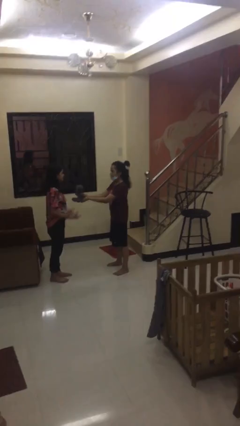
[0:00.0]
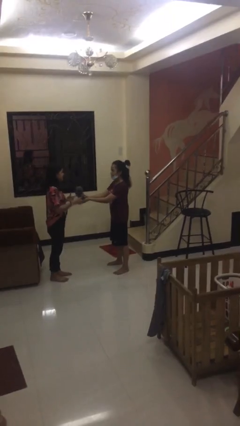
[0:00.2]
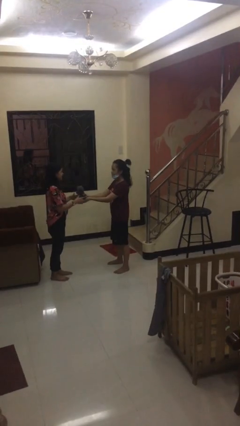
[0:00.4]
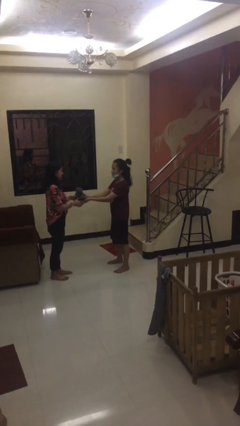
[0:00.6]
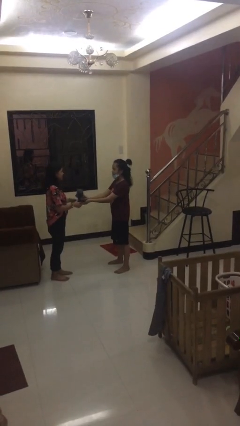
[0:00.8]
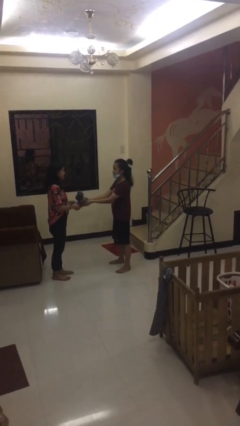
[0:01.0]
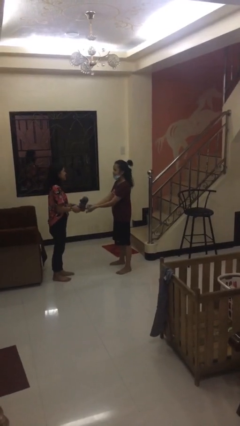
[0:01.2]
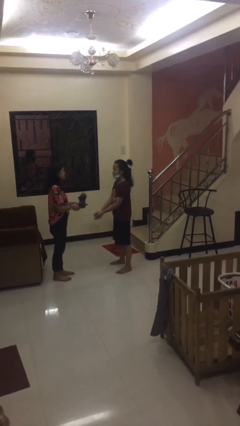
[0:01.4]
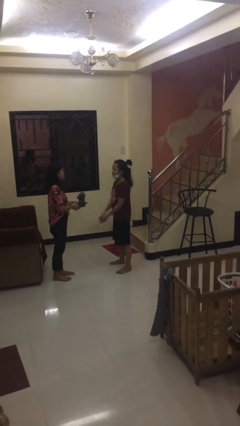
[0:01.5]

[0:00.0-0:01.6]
person transfers object to person

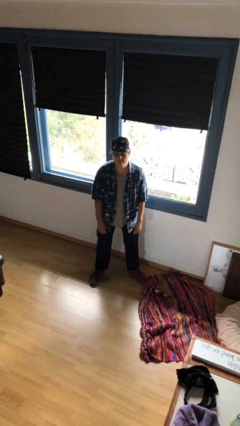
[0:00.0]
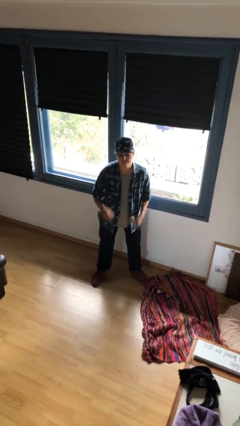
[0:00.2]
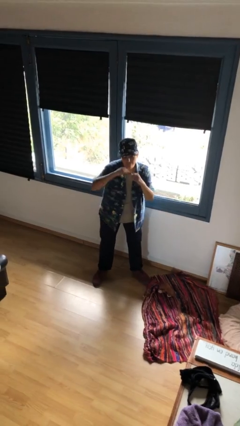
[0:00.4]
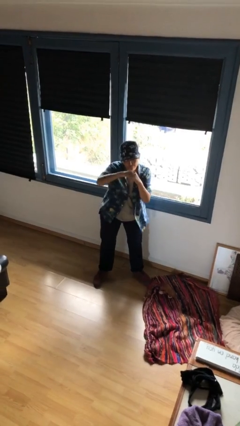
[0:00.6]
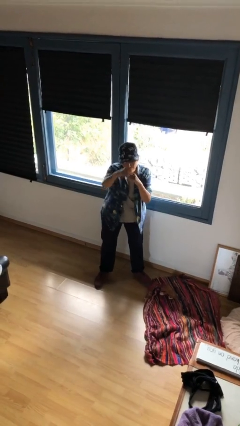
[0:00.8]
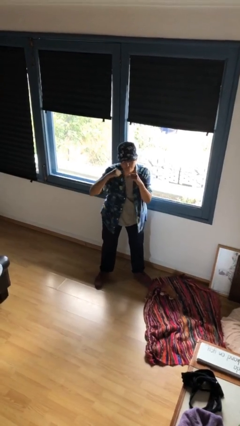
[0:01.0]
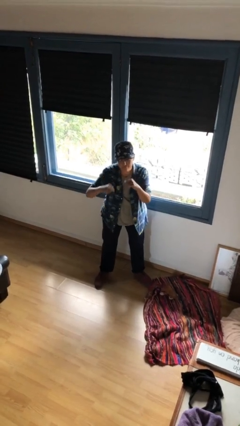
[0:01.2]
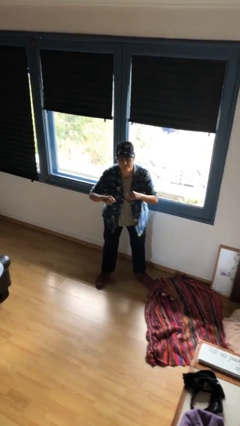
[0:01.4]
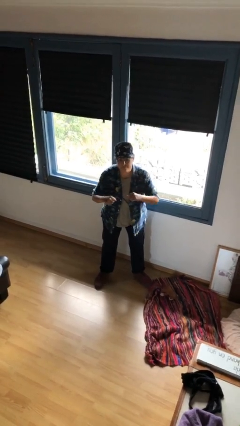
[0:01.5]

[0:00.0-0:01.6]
person punches

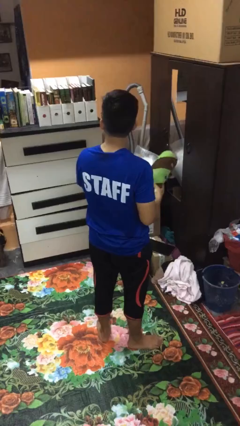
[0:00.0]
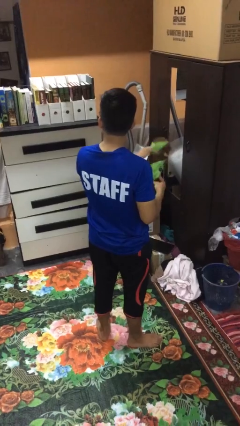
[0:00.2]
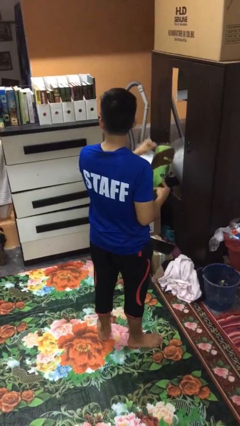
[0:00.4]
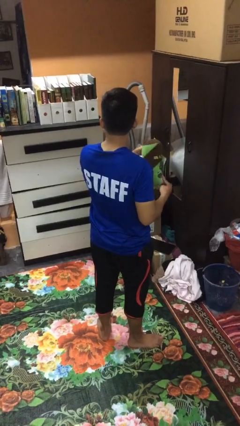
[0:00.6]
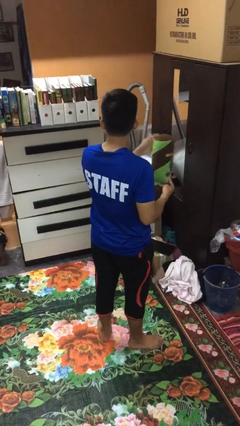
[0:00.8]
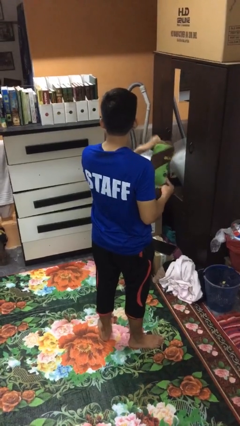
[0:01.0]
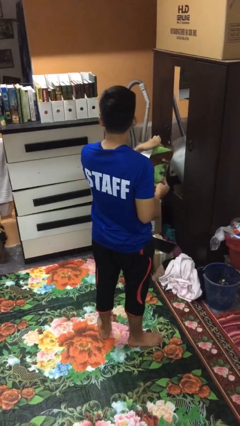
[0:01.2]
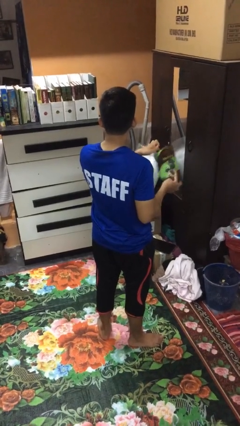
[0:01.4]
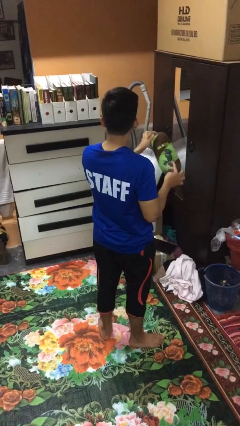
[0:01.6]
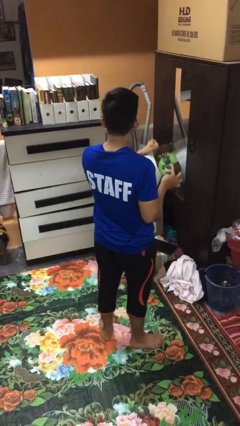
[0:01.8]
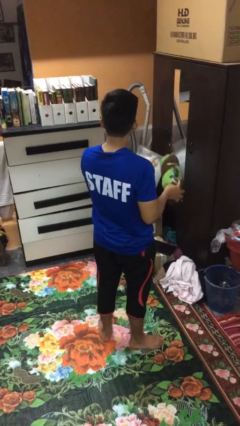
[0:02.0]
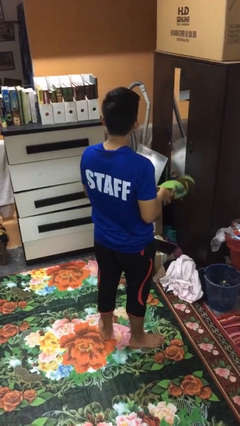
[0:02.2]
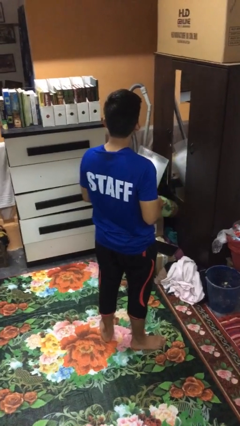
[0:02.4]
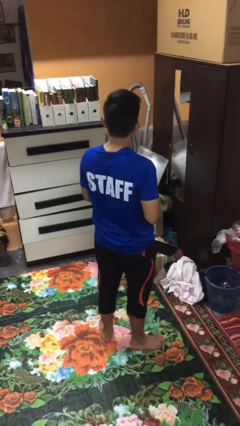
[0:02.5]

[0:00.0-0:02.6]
person taps object with finger

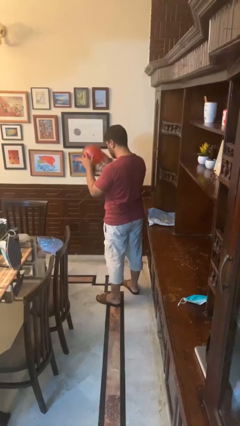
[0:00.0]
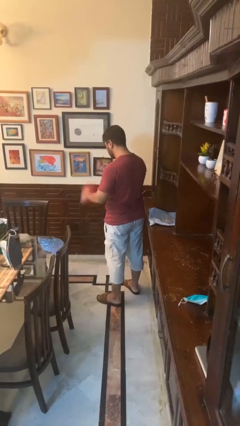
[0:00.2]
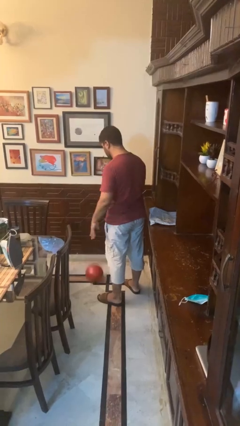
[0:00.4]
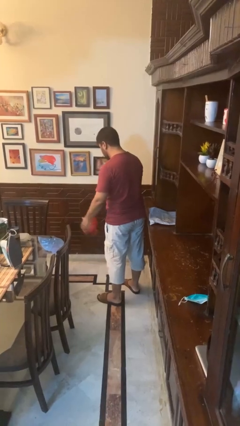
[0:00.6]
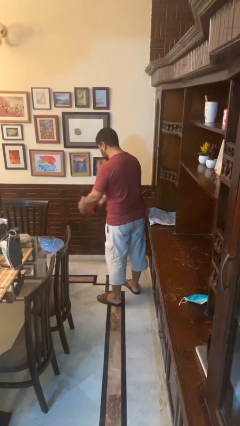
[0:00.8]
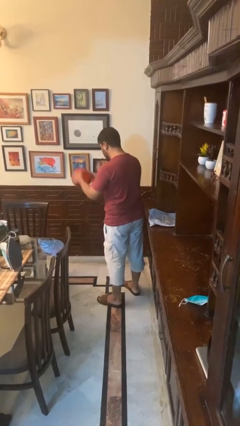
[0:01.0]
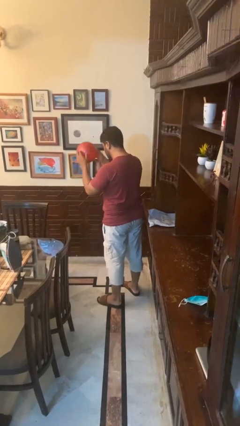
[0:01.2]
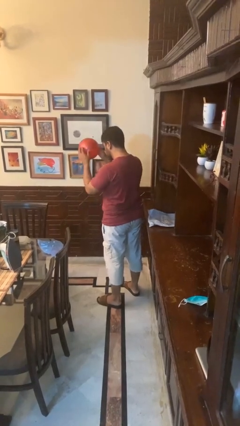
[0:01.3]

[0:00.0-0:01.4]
person bounces ball on floor

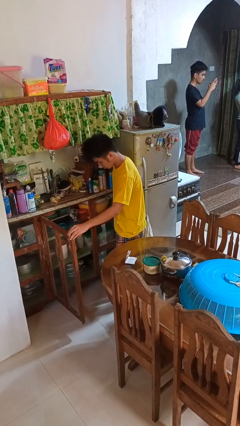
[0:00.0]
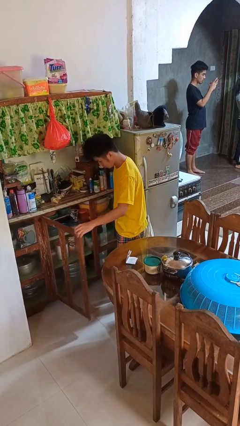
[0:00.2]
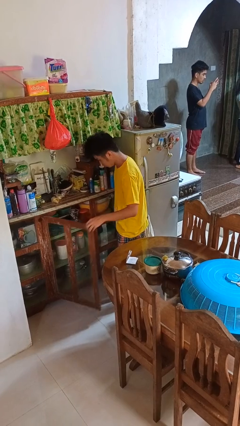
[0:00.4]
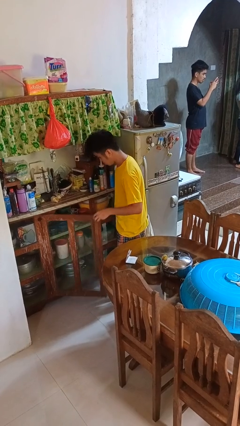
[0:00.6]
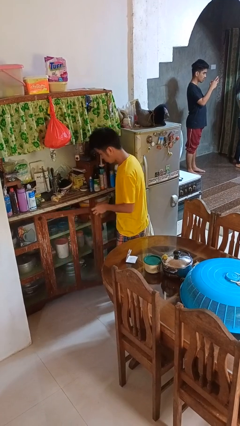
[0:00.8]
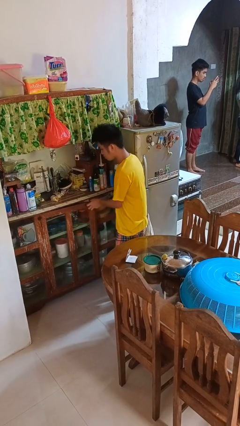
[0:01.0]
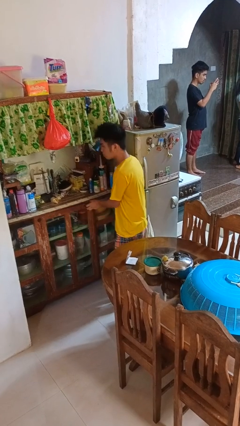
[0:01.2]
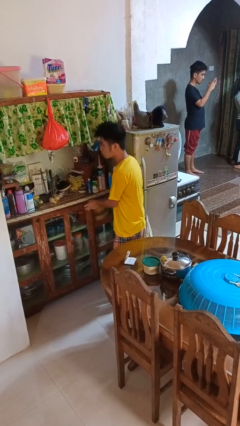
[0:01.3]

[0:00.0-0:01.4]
person closes cabinet

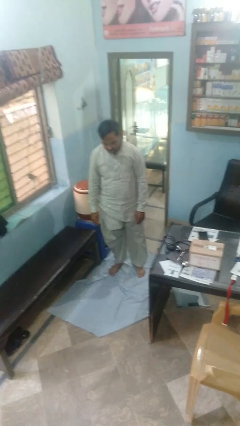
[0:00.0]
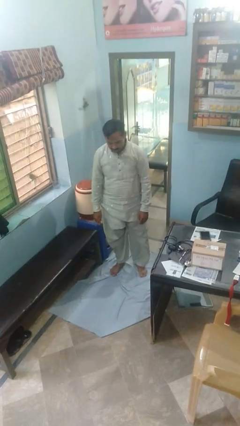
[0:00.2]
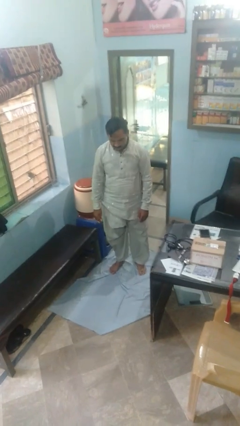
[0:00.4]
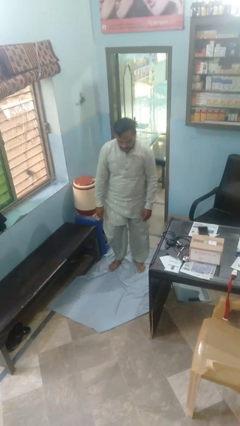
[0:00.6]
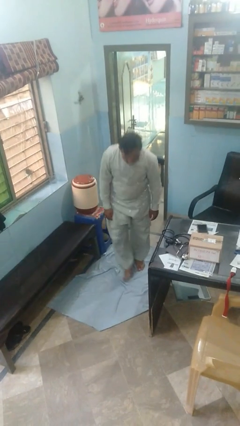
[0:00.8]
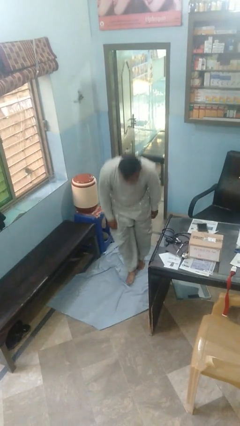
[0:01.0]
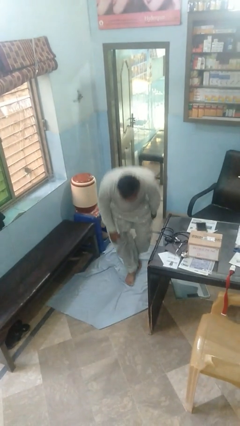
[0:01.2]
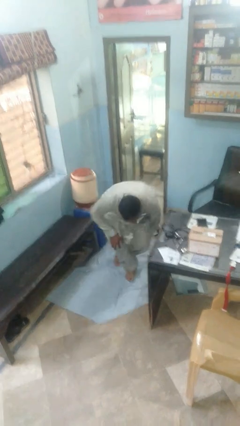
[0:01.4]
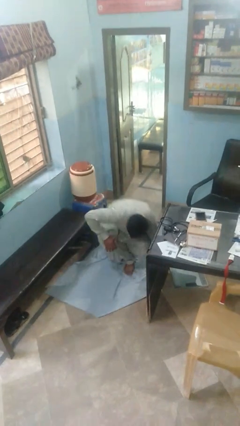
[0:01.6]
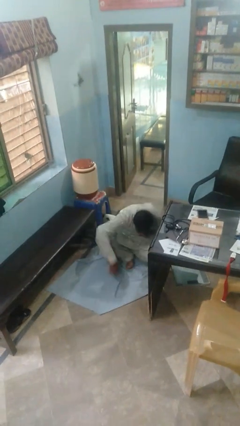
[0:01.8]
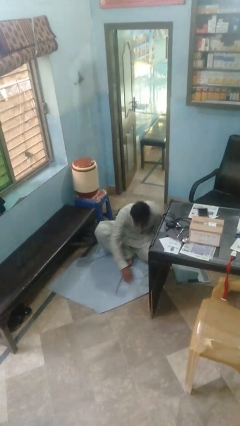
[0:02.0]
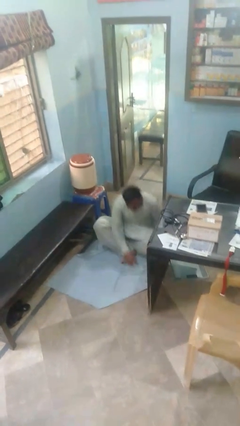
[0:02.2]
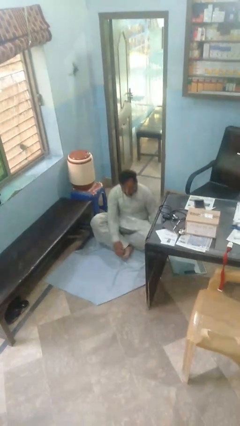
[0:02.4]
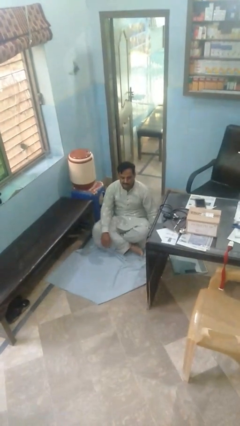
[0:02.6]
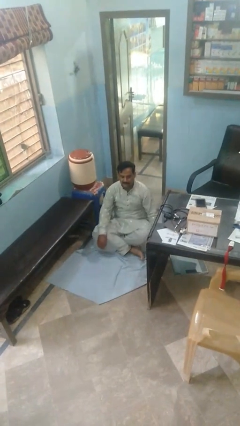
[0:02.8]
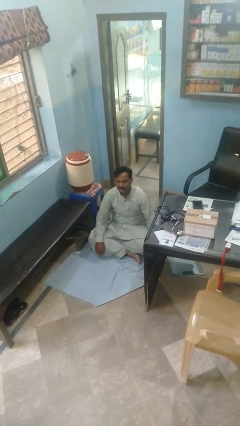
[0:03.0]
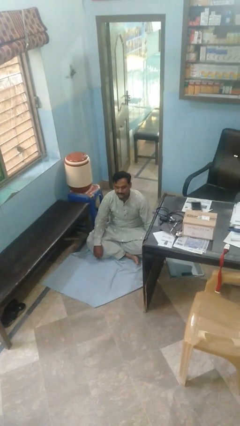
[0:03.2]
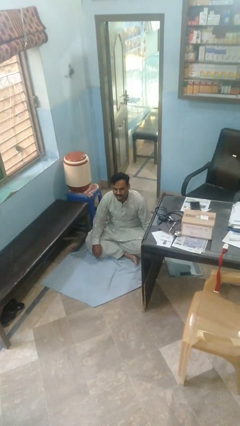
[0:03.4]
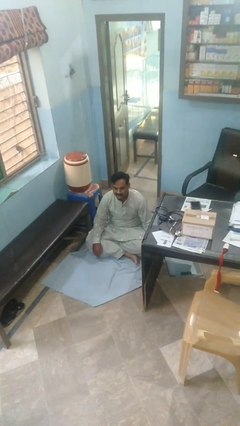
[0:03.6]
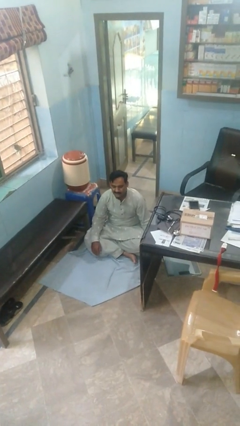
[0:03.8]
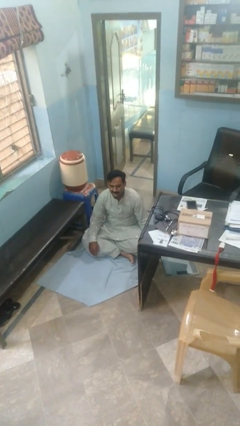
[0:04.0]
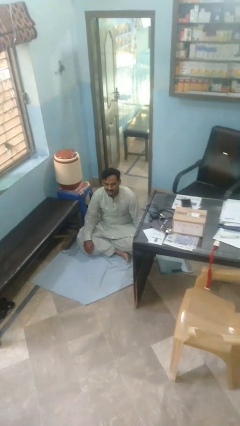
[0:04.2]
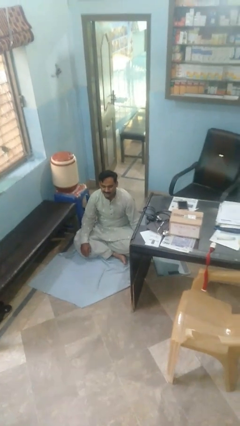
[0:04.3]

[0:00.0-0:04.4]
person sits crisscross

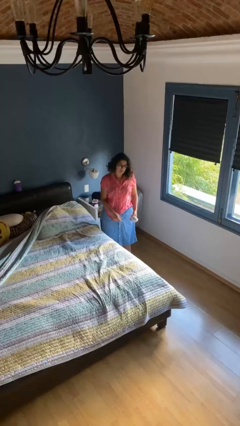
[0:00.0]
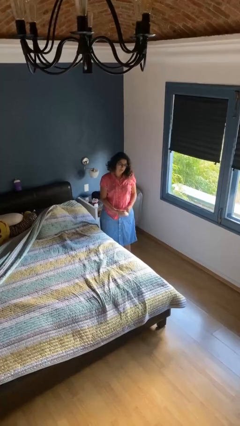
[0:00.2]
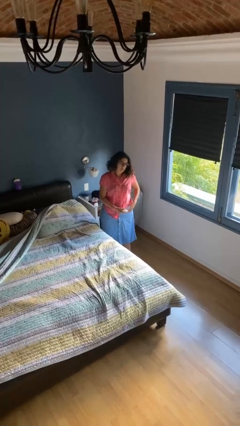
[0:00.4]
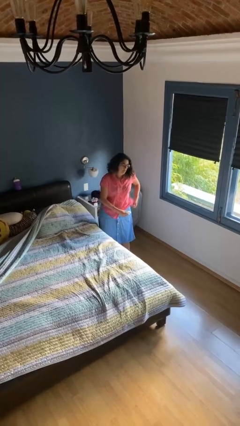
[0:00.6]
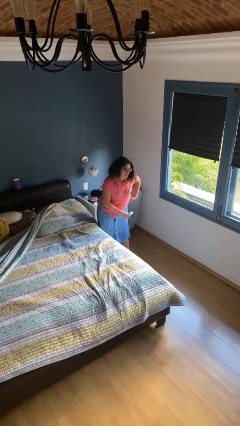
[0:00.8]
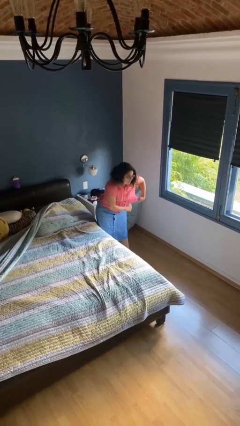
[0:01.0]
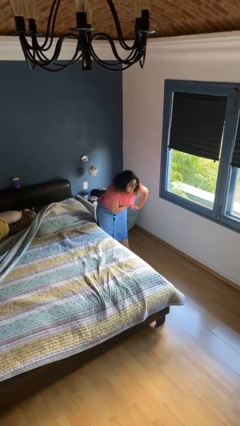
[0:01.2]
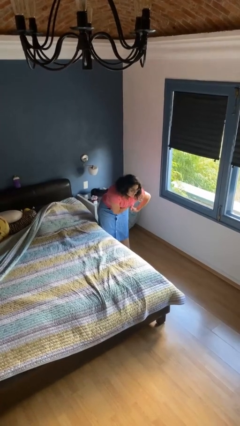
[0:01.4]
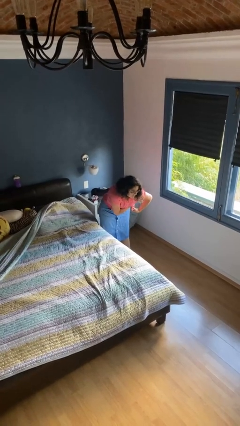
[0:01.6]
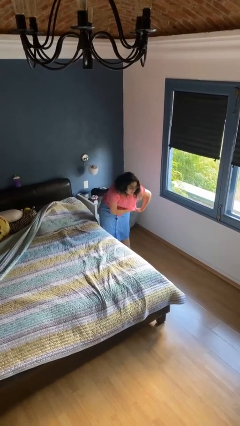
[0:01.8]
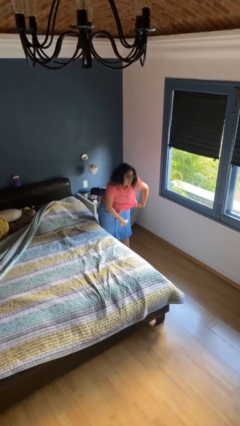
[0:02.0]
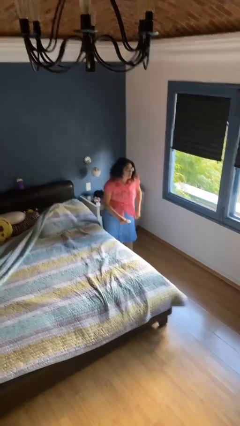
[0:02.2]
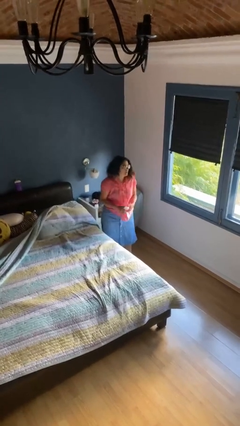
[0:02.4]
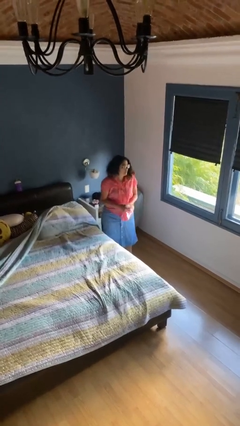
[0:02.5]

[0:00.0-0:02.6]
person applies deodorant

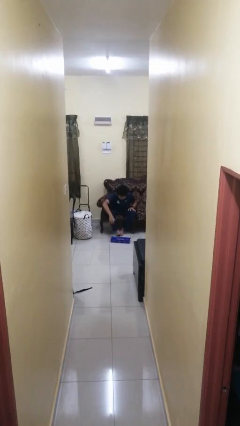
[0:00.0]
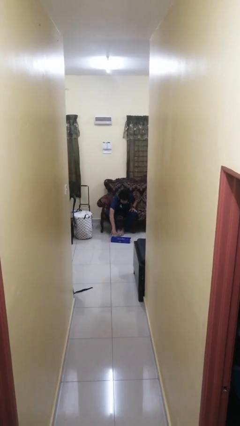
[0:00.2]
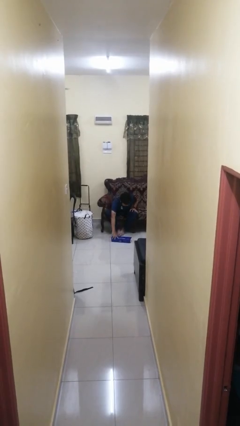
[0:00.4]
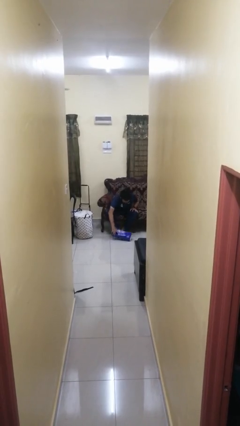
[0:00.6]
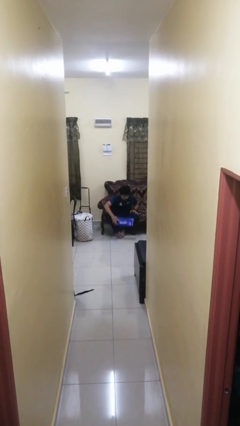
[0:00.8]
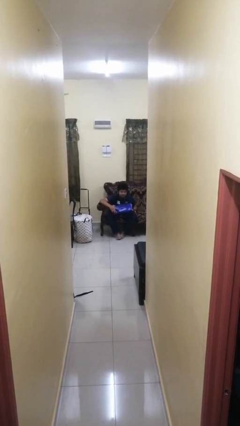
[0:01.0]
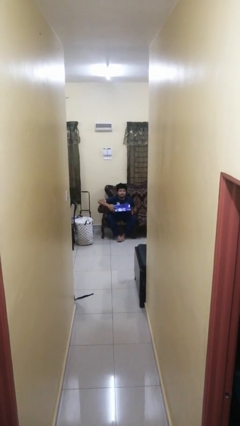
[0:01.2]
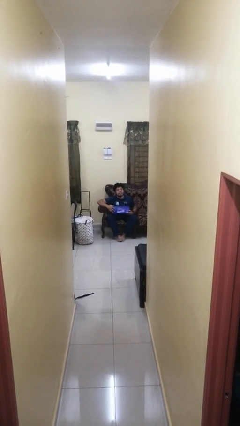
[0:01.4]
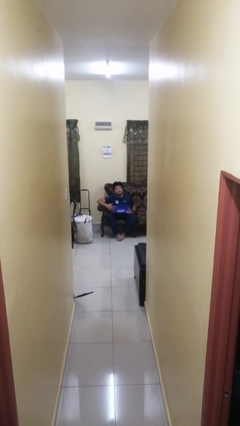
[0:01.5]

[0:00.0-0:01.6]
person picks up object from floor
